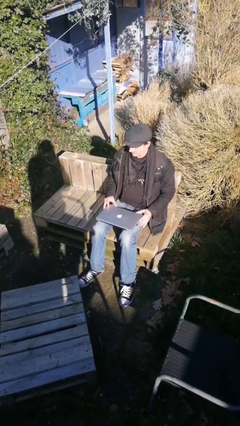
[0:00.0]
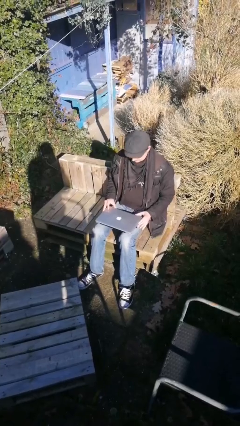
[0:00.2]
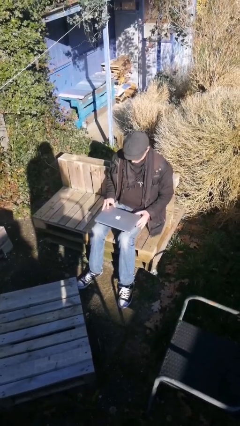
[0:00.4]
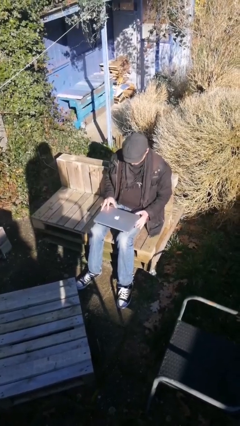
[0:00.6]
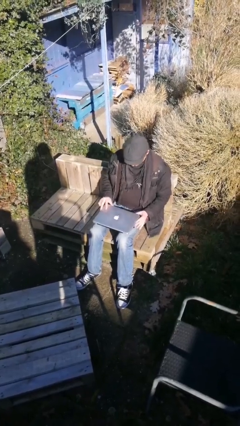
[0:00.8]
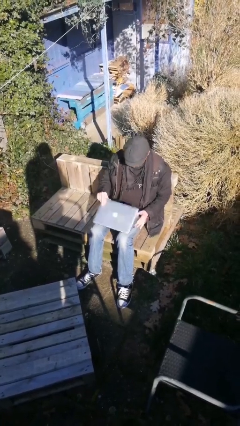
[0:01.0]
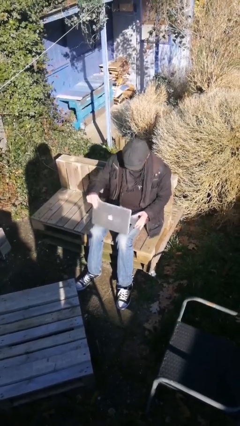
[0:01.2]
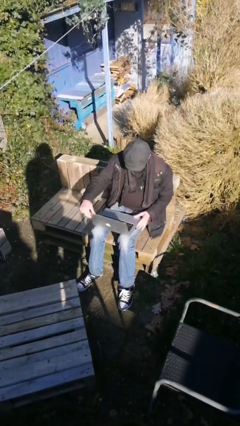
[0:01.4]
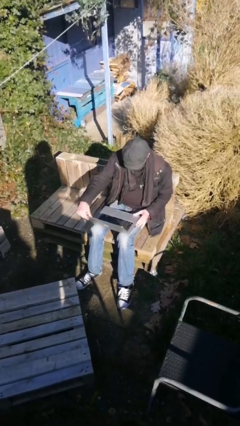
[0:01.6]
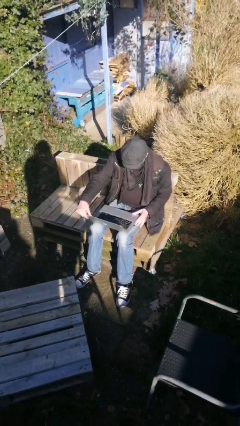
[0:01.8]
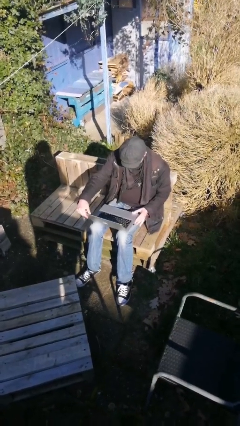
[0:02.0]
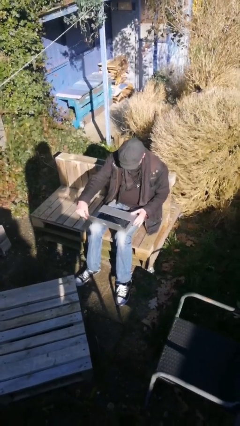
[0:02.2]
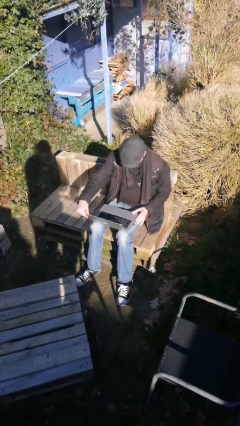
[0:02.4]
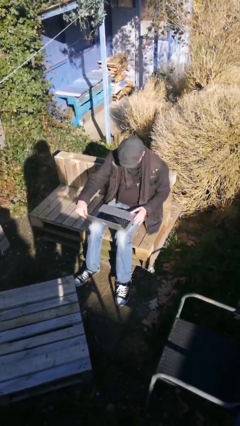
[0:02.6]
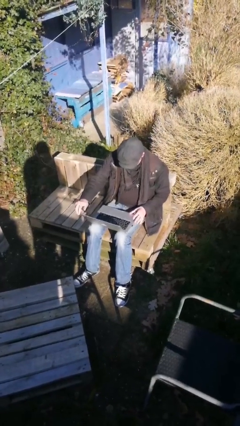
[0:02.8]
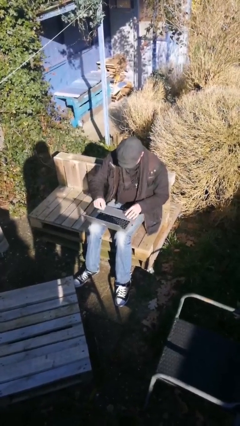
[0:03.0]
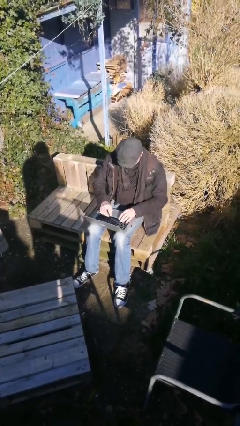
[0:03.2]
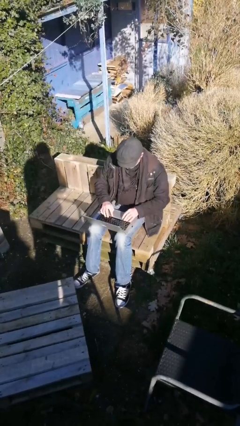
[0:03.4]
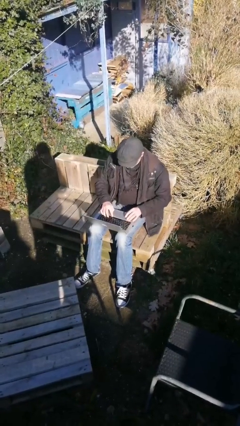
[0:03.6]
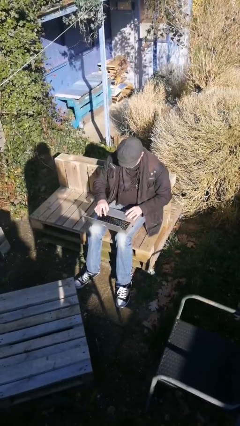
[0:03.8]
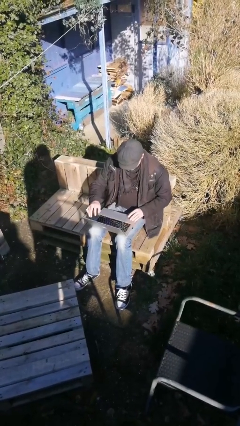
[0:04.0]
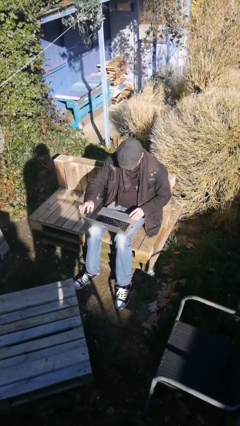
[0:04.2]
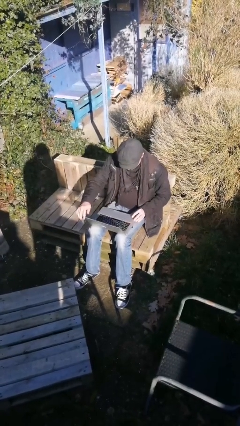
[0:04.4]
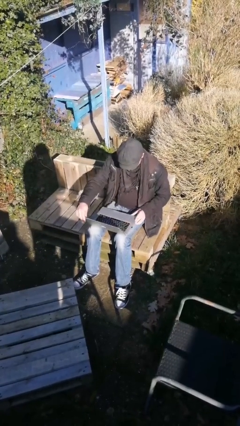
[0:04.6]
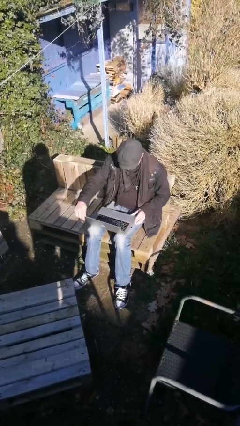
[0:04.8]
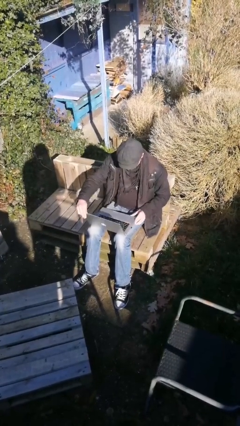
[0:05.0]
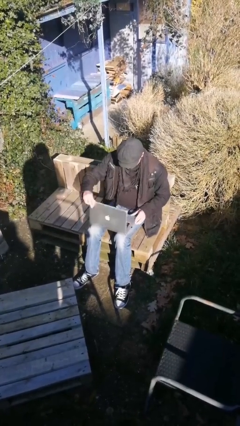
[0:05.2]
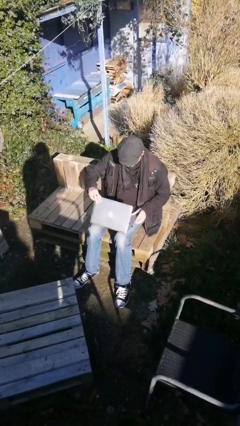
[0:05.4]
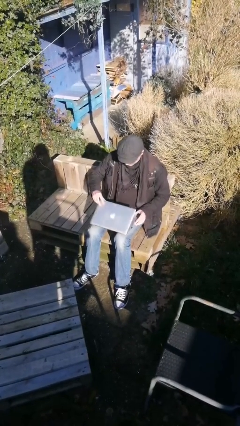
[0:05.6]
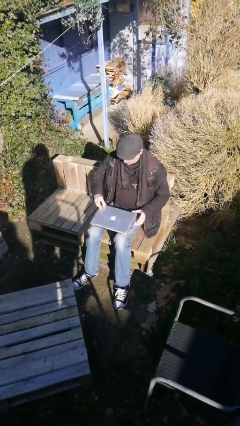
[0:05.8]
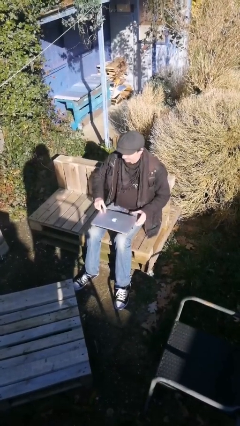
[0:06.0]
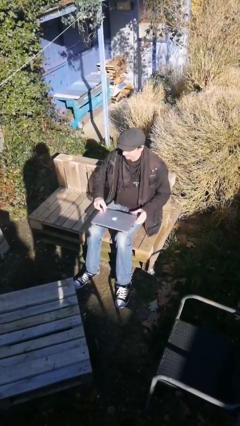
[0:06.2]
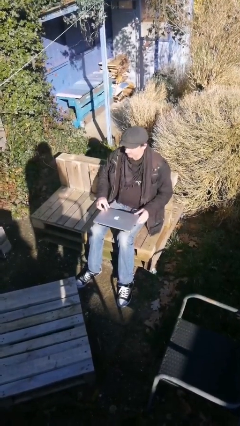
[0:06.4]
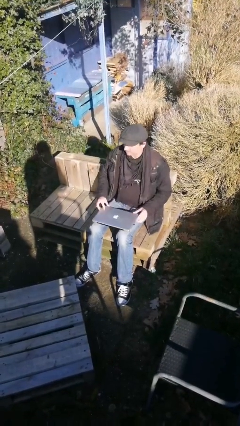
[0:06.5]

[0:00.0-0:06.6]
person interacts with laptop

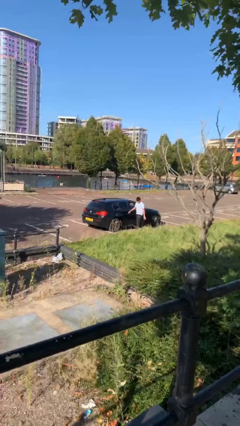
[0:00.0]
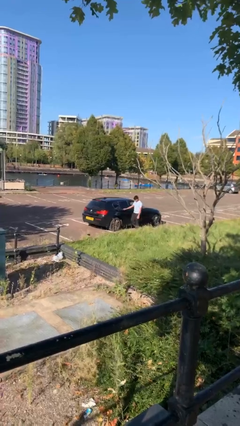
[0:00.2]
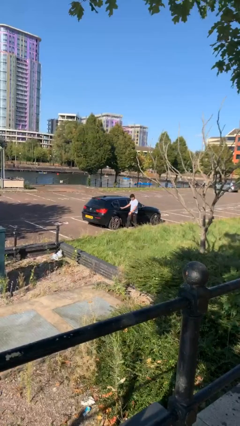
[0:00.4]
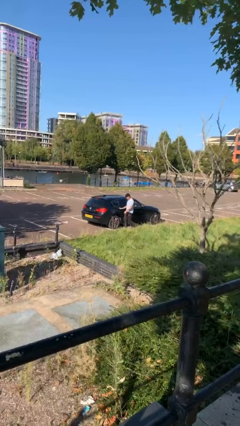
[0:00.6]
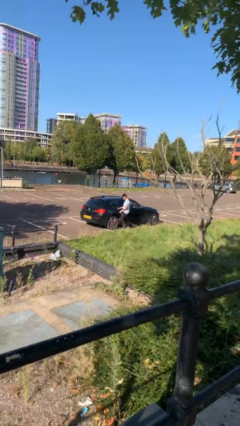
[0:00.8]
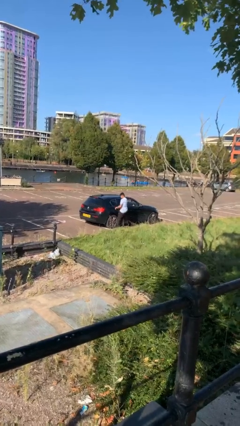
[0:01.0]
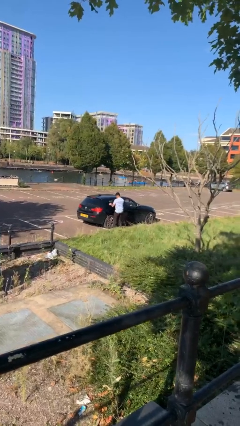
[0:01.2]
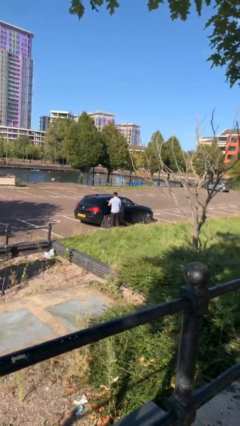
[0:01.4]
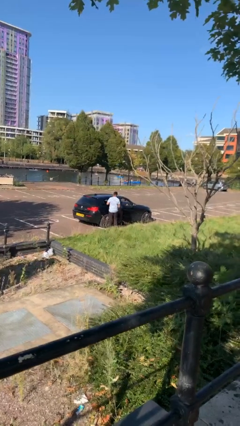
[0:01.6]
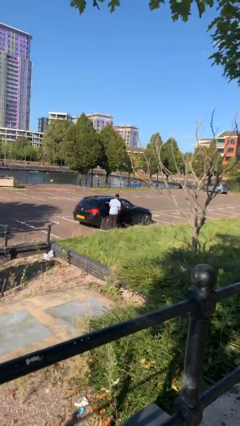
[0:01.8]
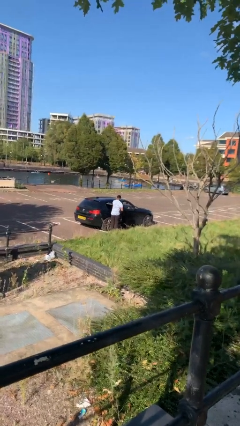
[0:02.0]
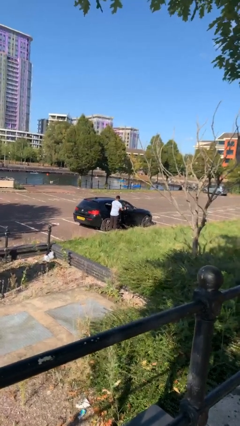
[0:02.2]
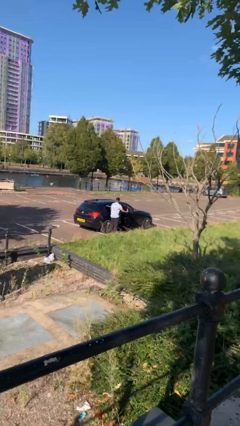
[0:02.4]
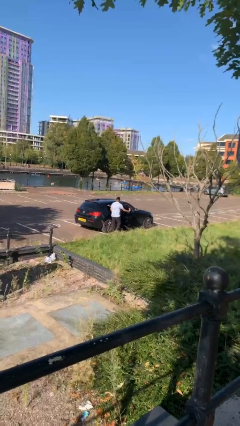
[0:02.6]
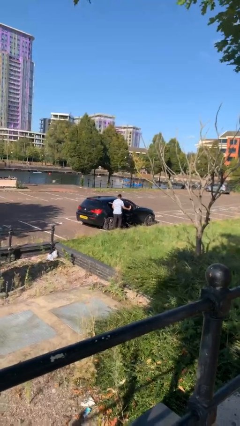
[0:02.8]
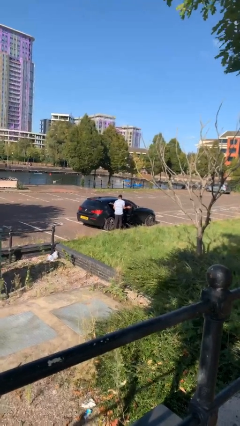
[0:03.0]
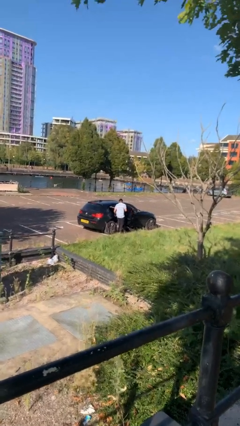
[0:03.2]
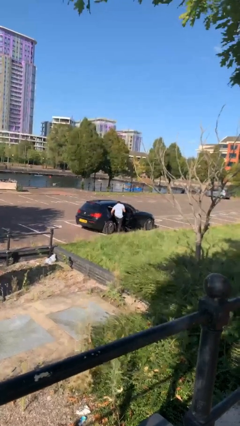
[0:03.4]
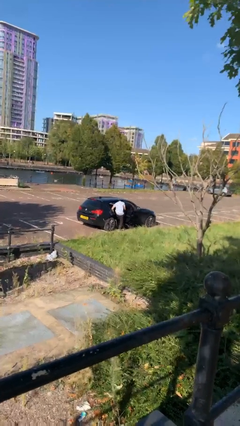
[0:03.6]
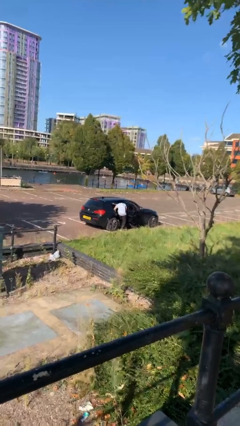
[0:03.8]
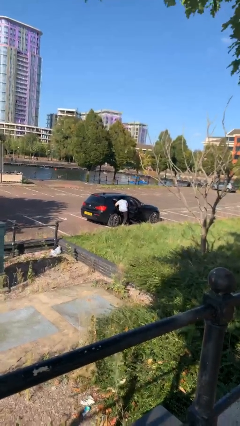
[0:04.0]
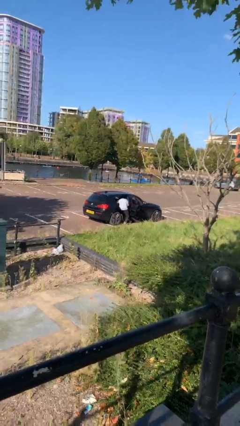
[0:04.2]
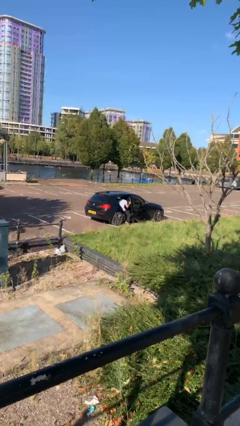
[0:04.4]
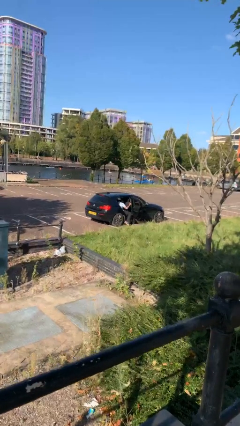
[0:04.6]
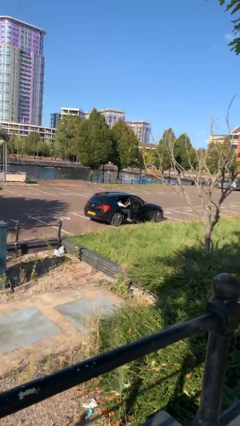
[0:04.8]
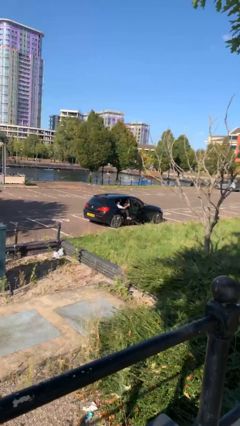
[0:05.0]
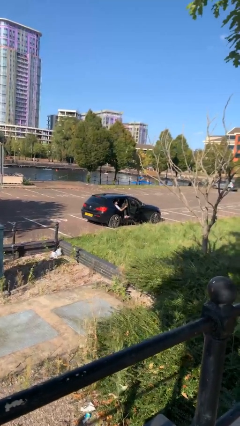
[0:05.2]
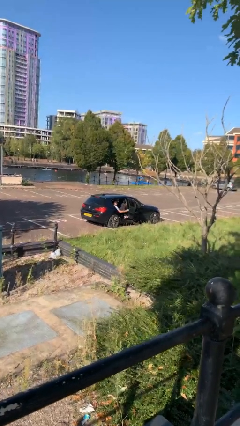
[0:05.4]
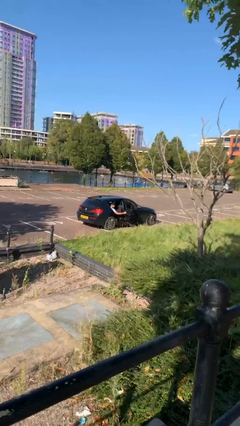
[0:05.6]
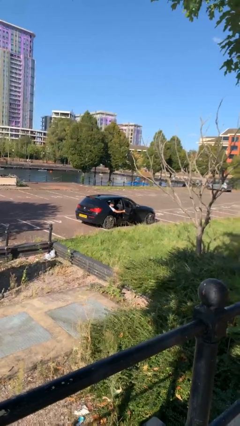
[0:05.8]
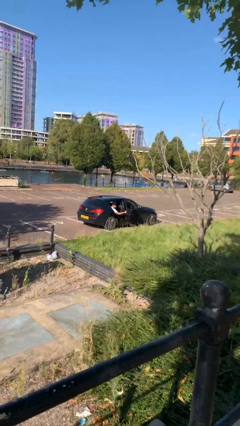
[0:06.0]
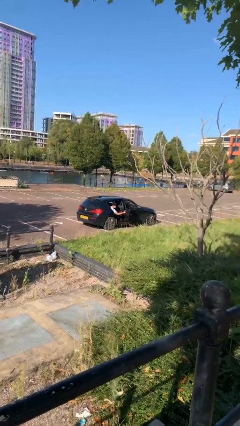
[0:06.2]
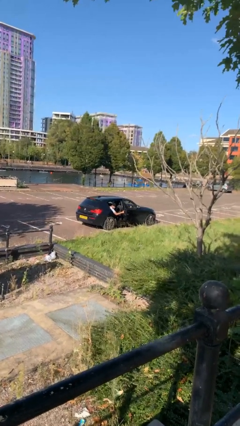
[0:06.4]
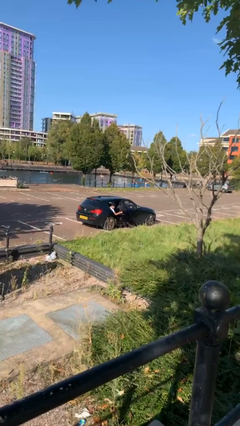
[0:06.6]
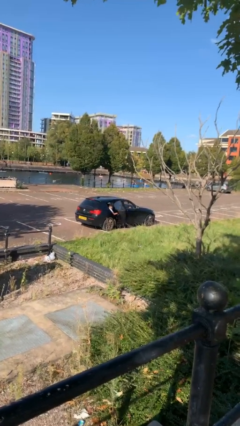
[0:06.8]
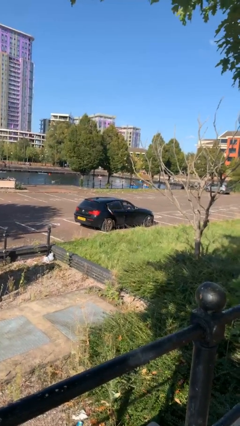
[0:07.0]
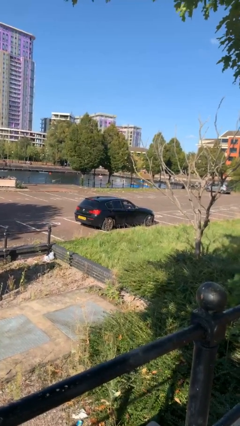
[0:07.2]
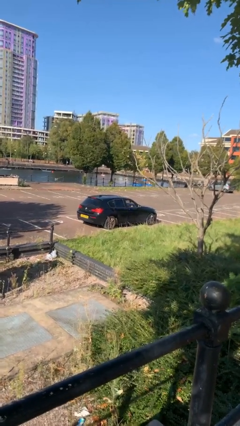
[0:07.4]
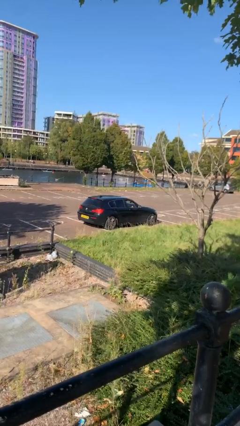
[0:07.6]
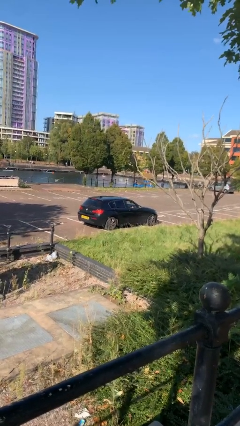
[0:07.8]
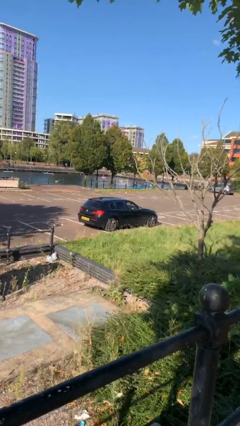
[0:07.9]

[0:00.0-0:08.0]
car picks up person

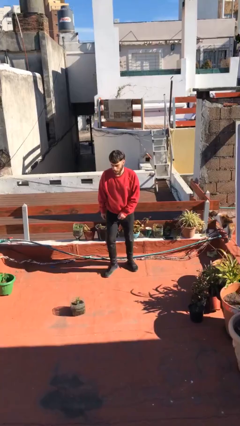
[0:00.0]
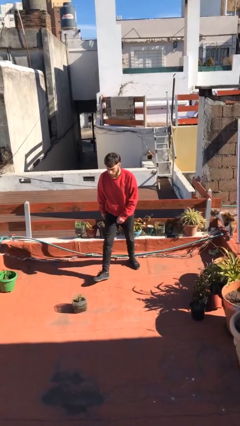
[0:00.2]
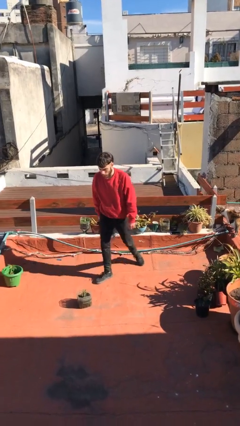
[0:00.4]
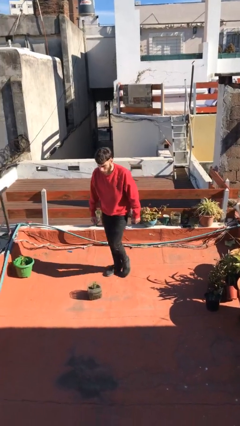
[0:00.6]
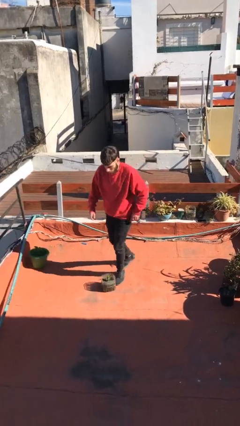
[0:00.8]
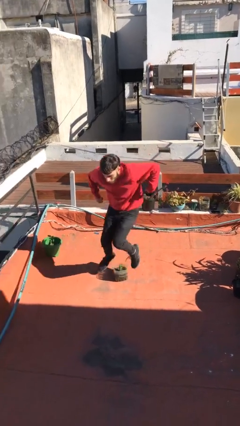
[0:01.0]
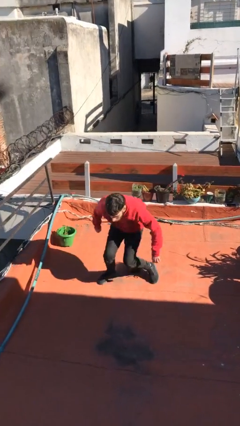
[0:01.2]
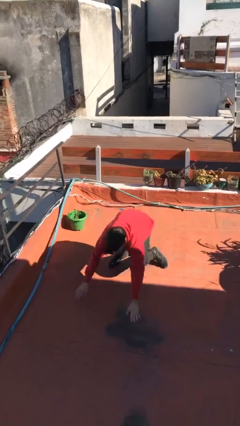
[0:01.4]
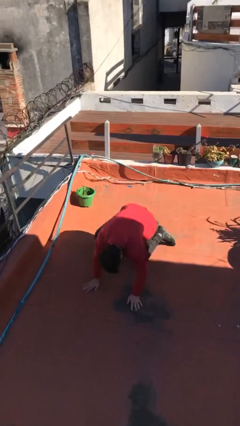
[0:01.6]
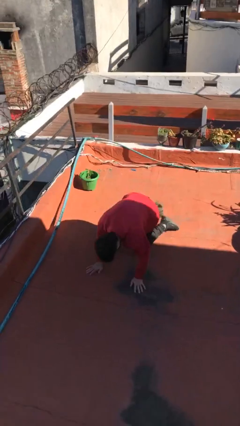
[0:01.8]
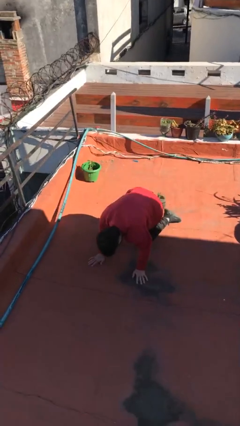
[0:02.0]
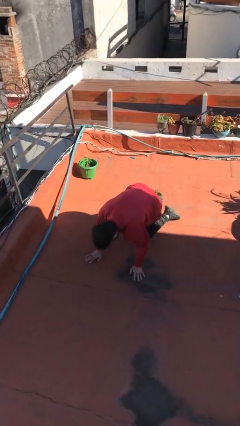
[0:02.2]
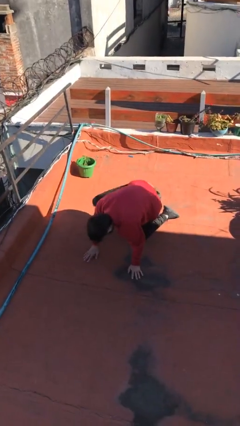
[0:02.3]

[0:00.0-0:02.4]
person trips on object on floor

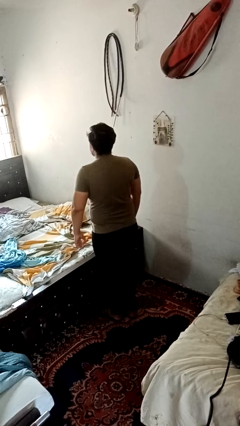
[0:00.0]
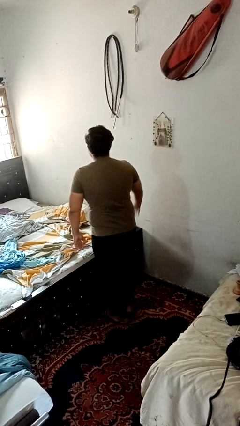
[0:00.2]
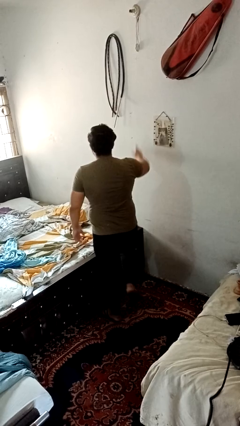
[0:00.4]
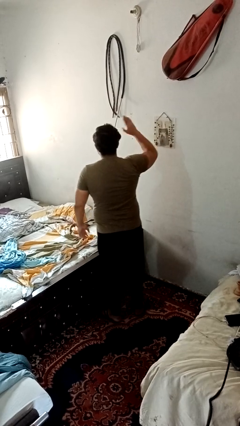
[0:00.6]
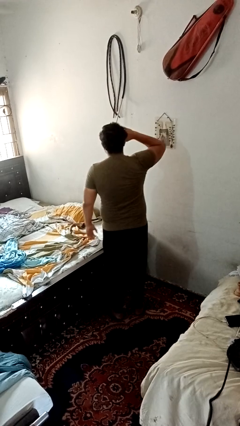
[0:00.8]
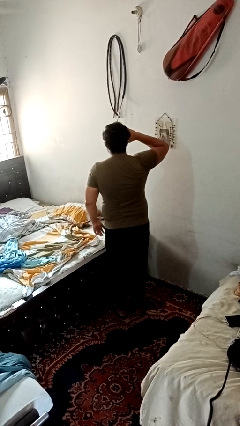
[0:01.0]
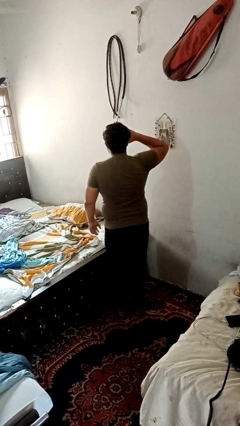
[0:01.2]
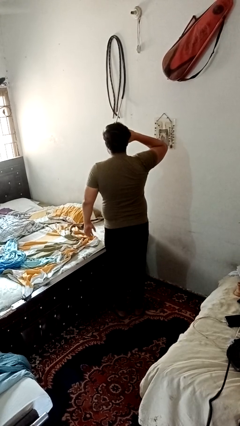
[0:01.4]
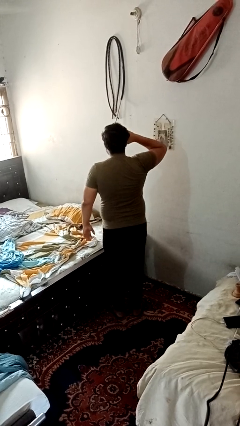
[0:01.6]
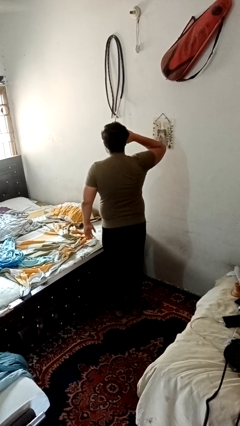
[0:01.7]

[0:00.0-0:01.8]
person salutes
